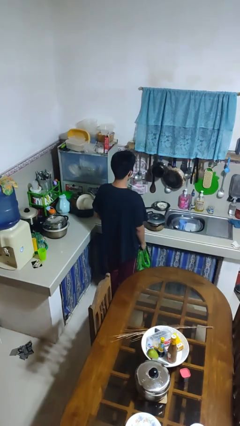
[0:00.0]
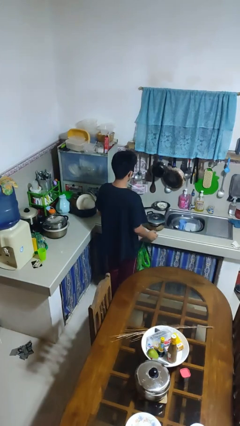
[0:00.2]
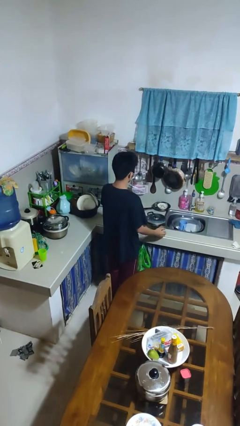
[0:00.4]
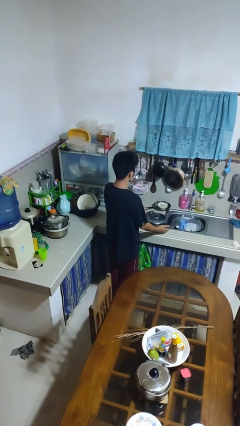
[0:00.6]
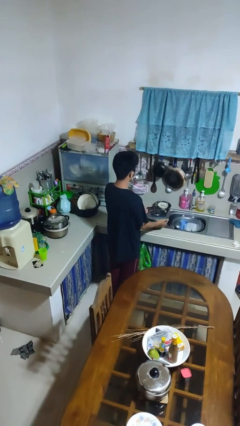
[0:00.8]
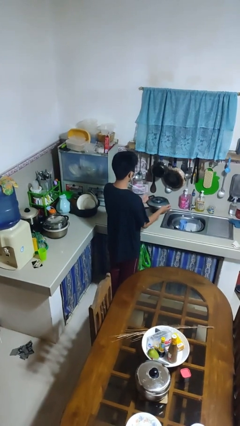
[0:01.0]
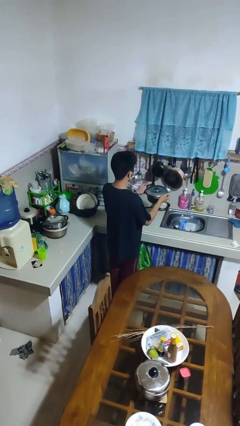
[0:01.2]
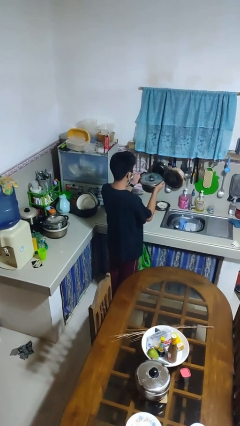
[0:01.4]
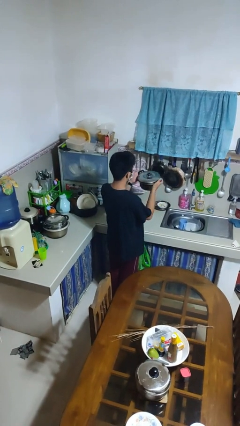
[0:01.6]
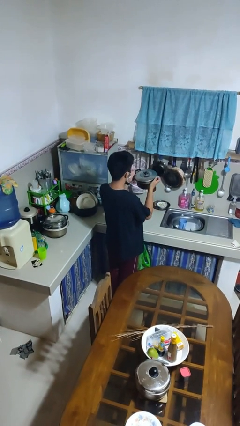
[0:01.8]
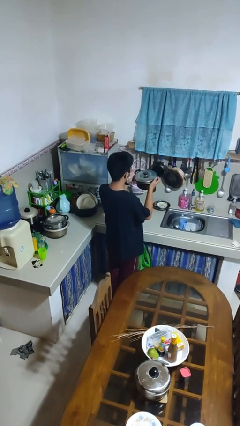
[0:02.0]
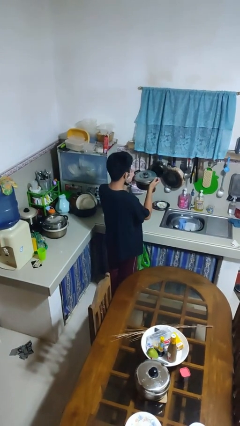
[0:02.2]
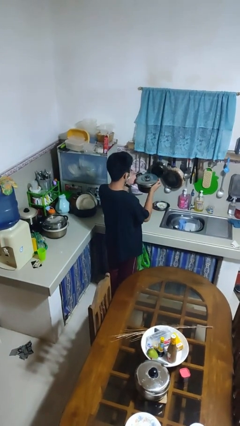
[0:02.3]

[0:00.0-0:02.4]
person picks up object from countertop

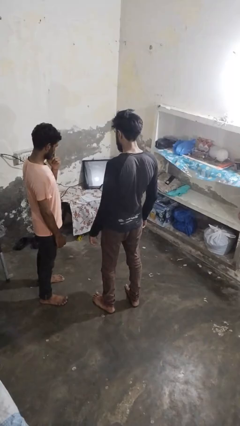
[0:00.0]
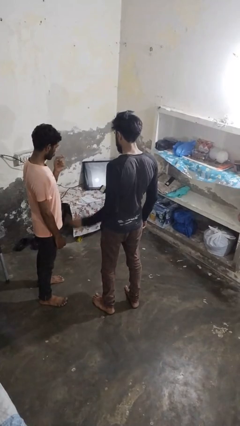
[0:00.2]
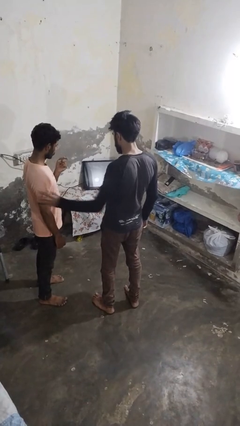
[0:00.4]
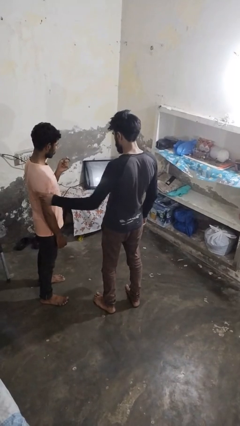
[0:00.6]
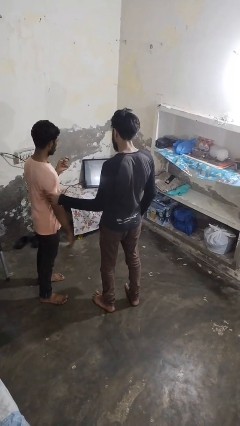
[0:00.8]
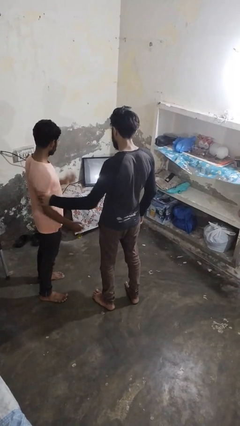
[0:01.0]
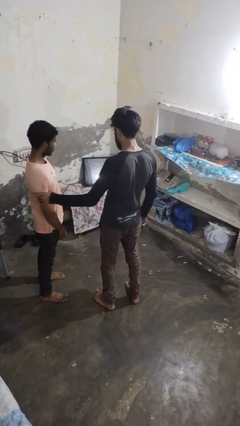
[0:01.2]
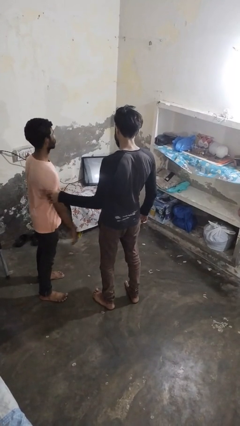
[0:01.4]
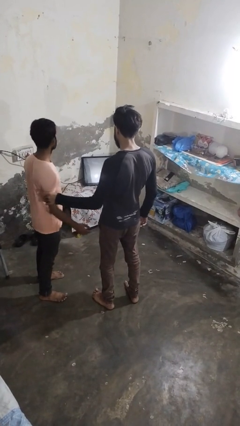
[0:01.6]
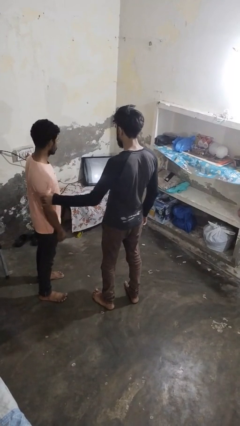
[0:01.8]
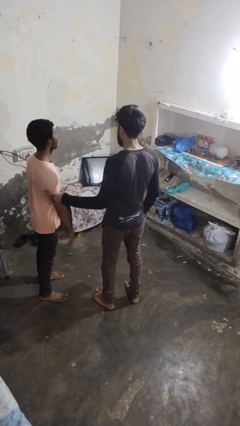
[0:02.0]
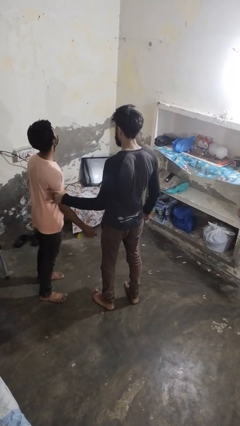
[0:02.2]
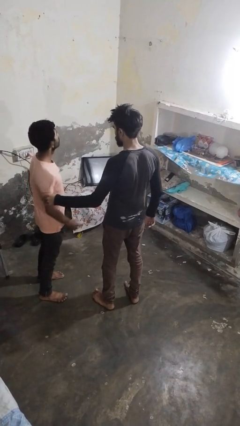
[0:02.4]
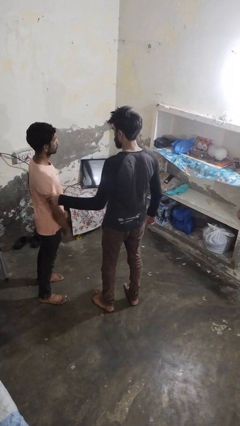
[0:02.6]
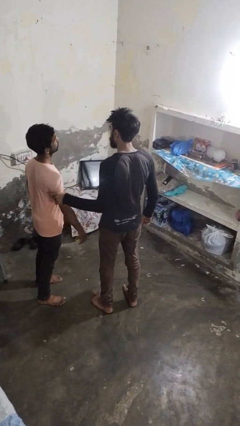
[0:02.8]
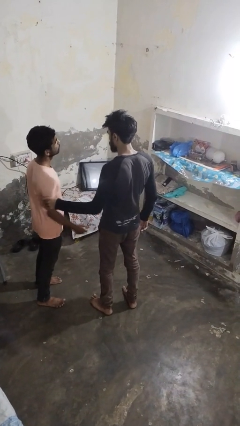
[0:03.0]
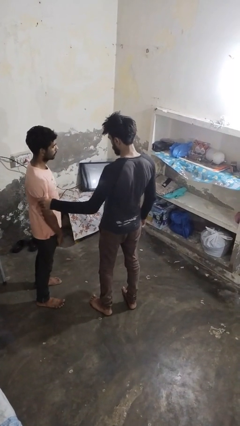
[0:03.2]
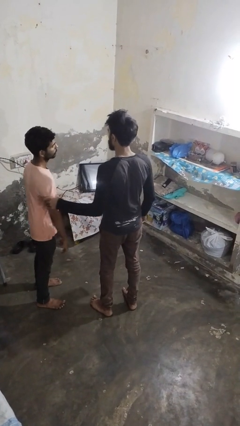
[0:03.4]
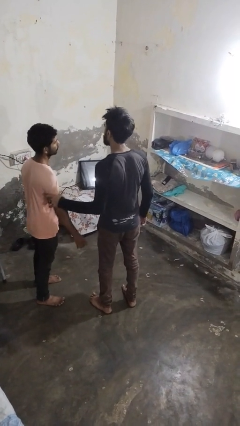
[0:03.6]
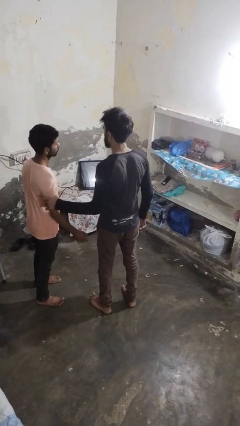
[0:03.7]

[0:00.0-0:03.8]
person grabs person by bicep

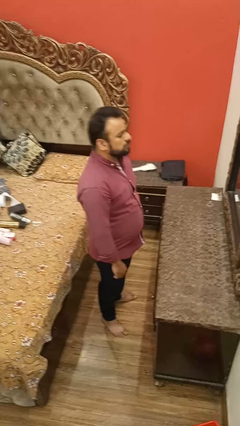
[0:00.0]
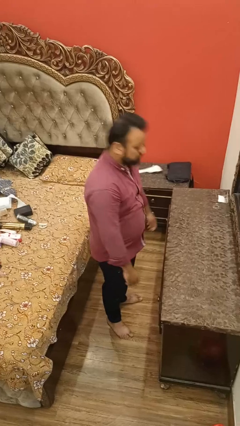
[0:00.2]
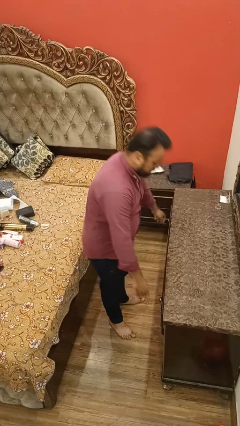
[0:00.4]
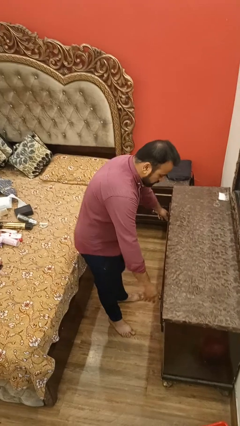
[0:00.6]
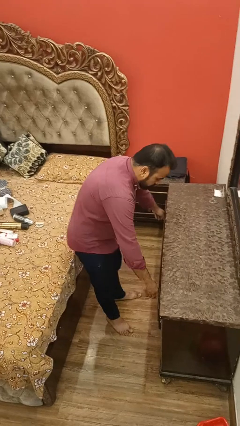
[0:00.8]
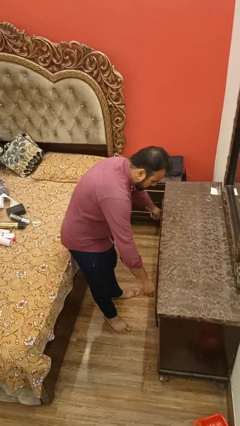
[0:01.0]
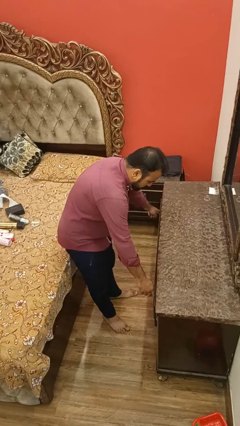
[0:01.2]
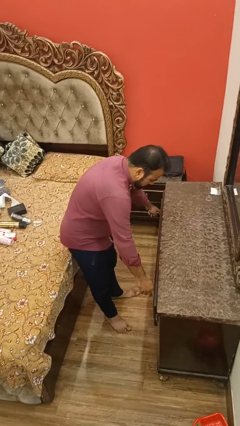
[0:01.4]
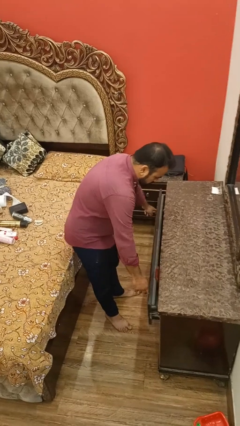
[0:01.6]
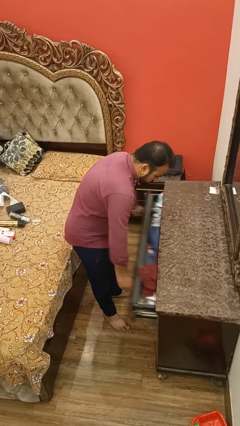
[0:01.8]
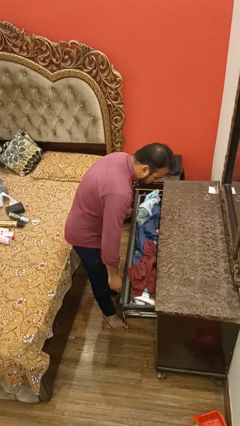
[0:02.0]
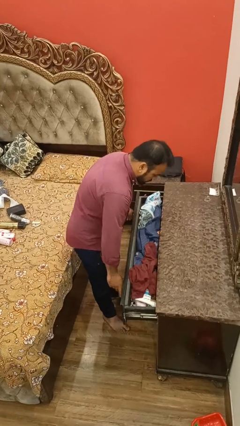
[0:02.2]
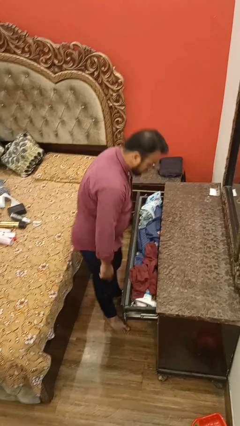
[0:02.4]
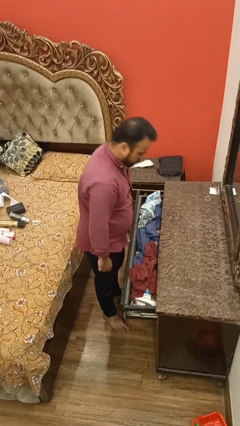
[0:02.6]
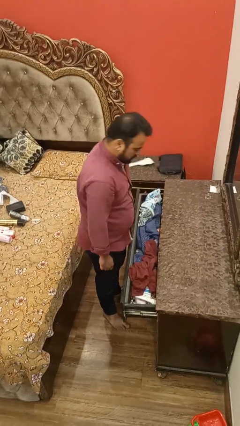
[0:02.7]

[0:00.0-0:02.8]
person opens dresser drawer

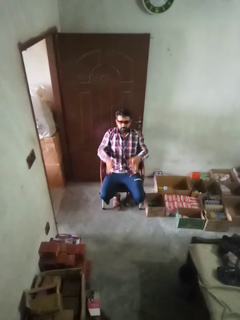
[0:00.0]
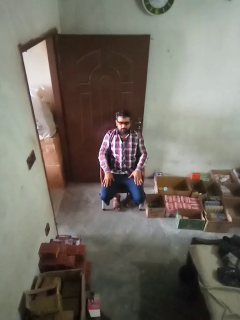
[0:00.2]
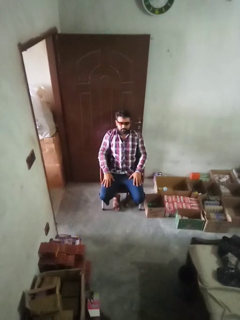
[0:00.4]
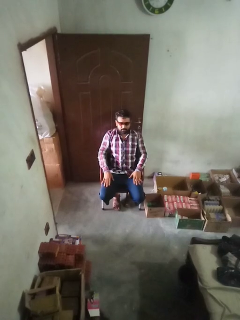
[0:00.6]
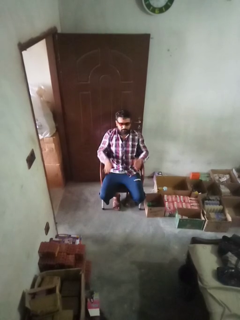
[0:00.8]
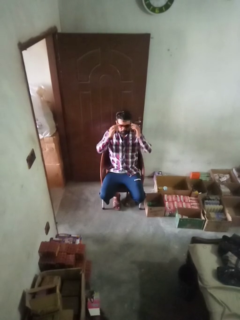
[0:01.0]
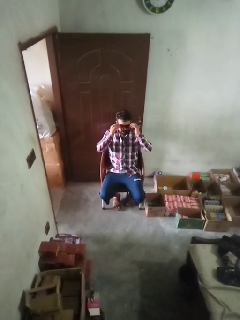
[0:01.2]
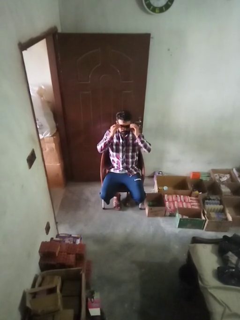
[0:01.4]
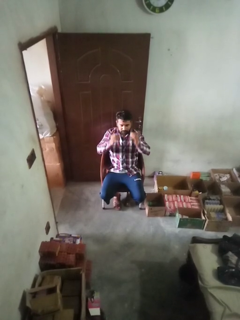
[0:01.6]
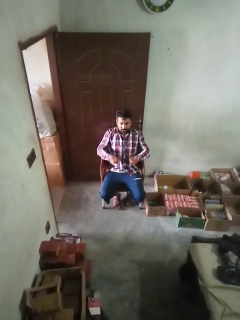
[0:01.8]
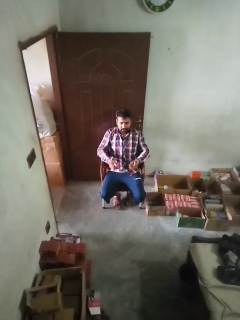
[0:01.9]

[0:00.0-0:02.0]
person takes off sunglasses

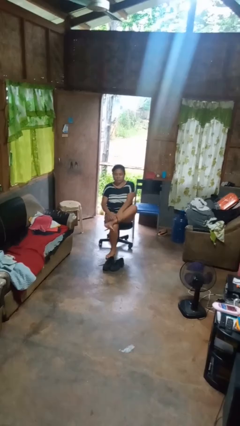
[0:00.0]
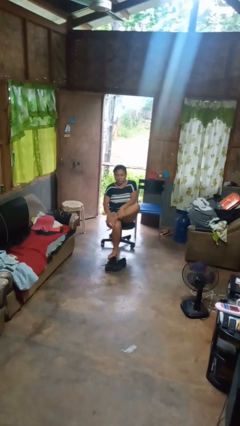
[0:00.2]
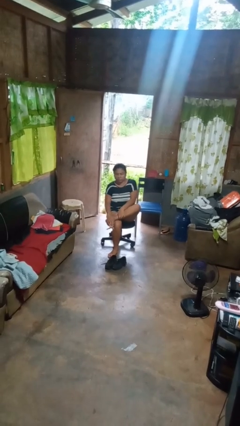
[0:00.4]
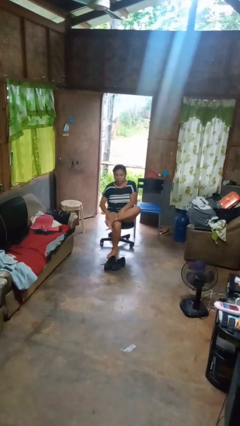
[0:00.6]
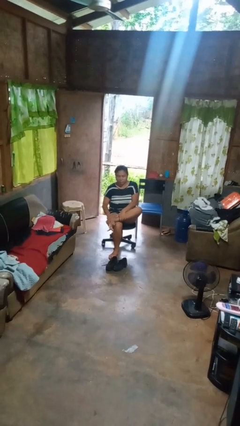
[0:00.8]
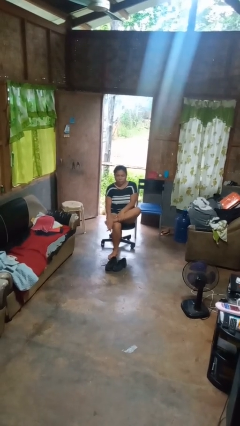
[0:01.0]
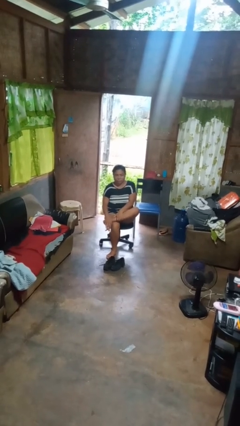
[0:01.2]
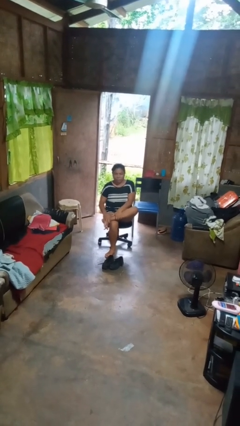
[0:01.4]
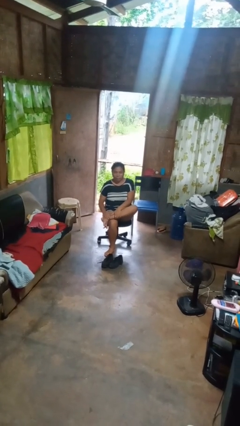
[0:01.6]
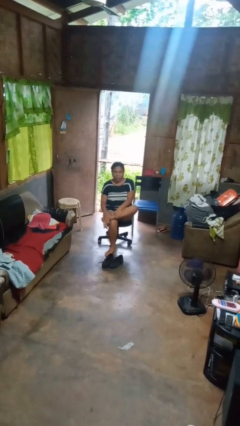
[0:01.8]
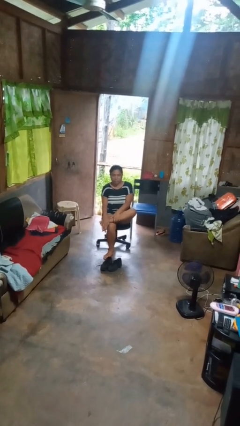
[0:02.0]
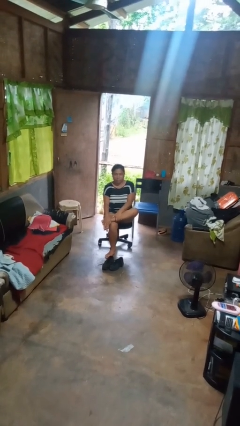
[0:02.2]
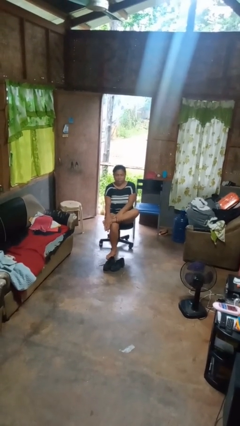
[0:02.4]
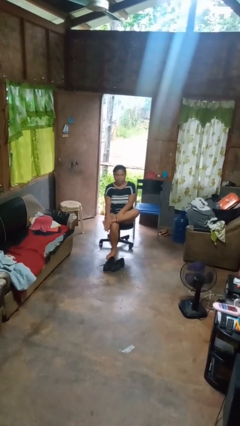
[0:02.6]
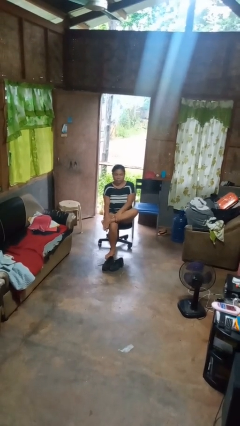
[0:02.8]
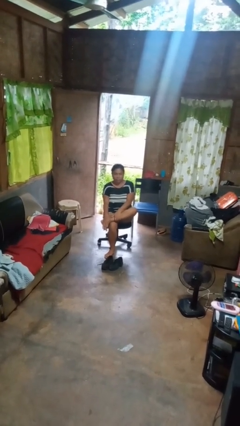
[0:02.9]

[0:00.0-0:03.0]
person rubs foot

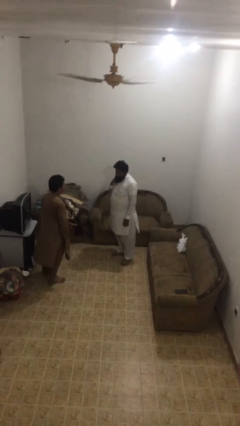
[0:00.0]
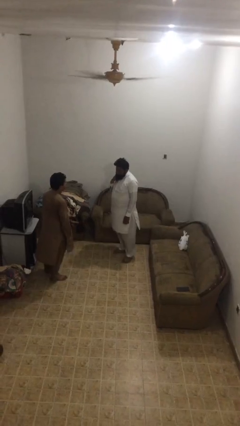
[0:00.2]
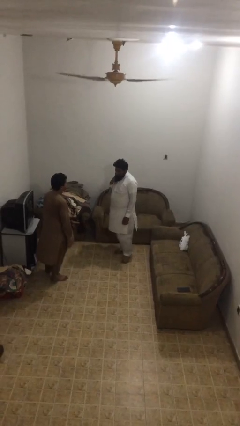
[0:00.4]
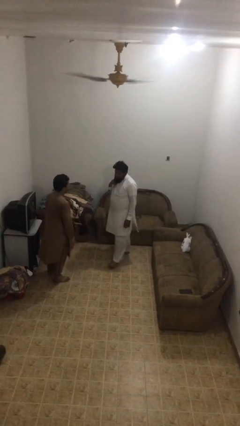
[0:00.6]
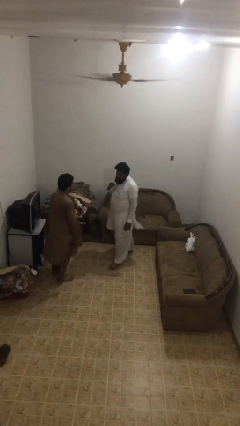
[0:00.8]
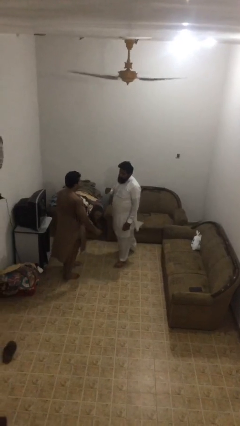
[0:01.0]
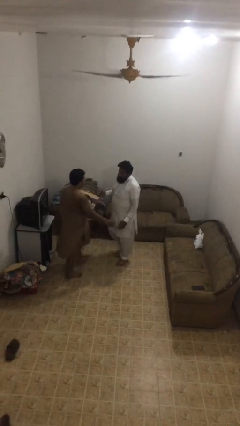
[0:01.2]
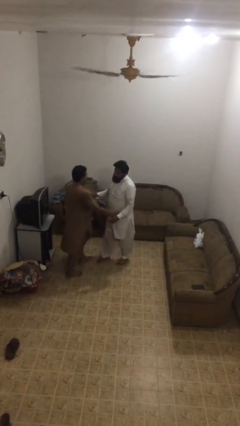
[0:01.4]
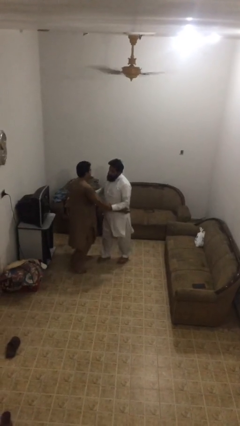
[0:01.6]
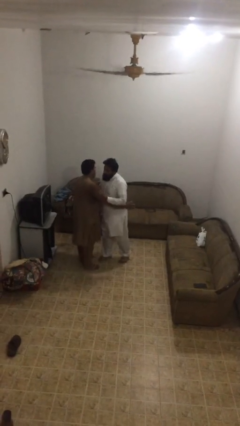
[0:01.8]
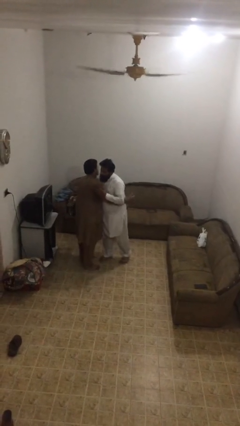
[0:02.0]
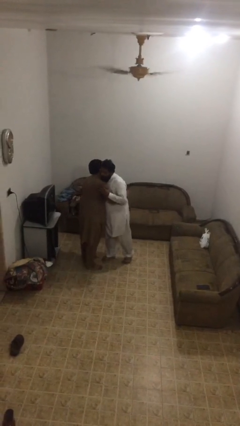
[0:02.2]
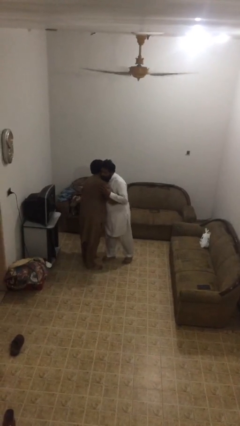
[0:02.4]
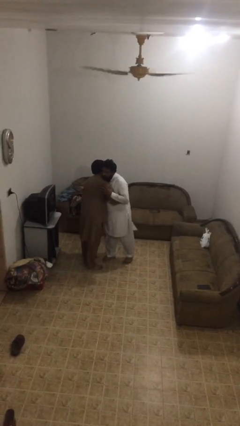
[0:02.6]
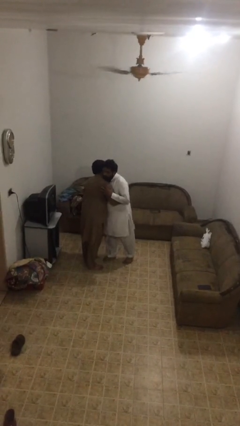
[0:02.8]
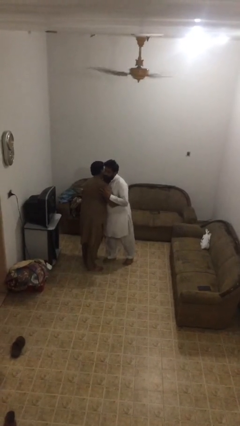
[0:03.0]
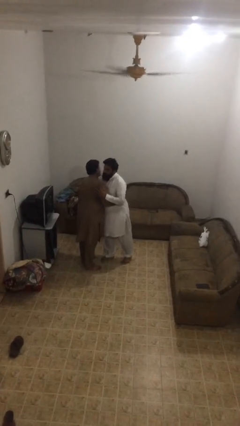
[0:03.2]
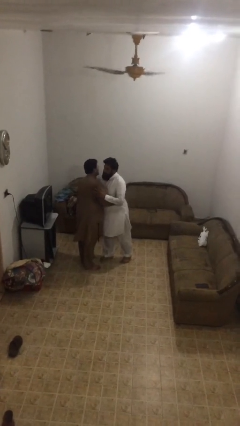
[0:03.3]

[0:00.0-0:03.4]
person embraces person

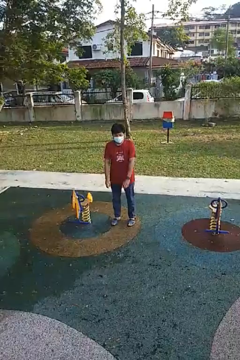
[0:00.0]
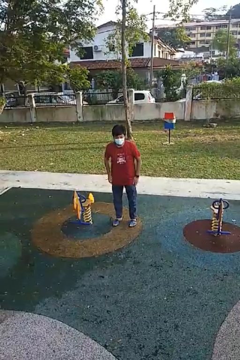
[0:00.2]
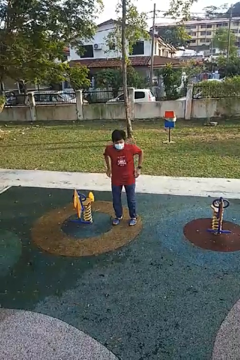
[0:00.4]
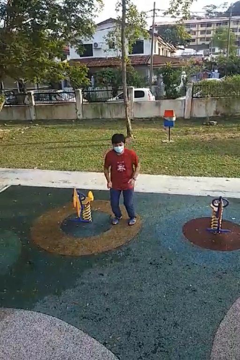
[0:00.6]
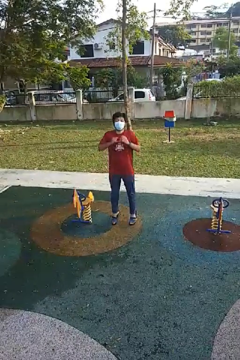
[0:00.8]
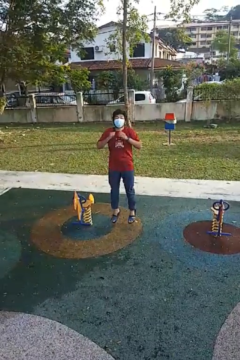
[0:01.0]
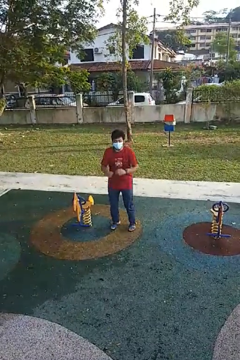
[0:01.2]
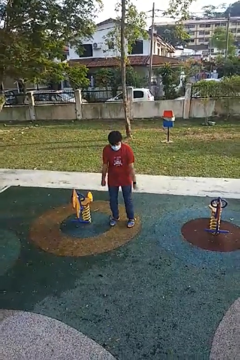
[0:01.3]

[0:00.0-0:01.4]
person jumps
